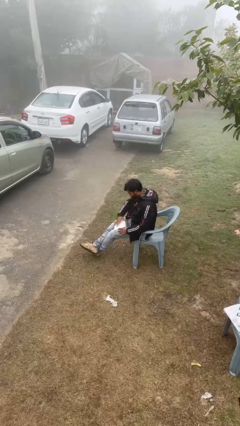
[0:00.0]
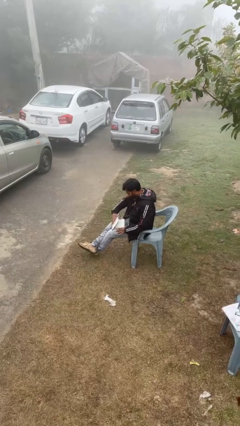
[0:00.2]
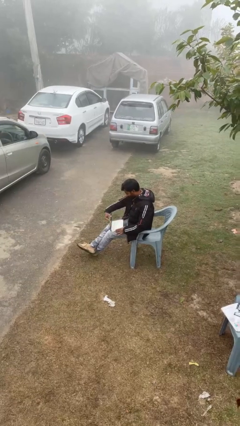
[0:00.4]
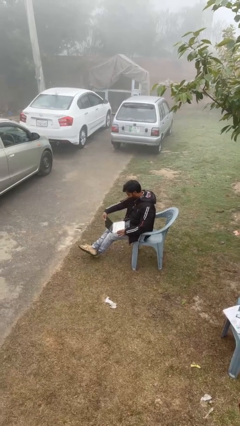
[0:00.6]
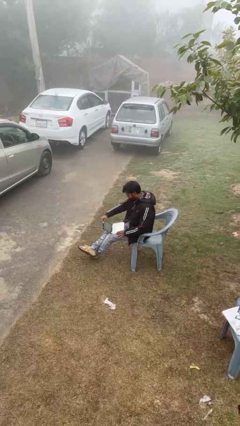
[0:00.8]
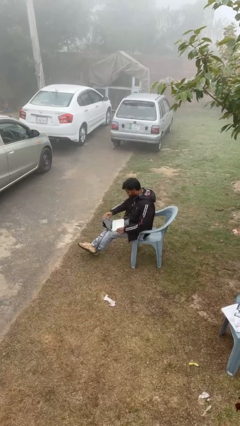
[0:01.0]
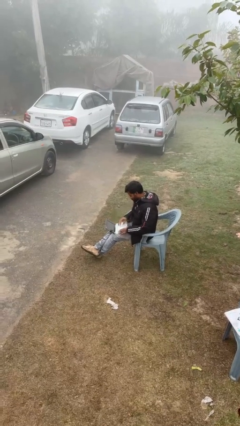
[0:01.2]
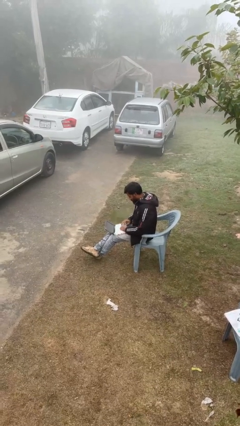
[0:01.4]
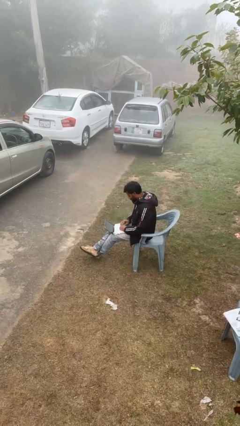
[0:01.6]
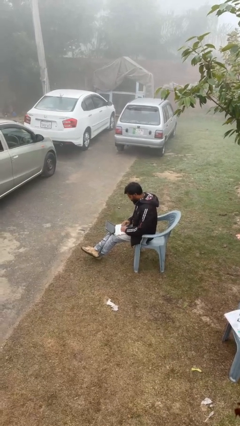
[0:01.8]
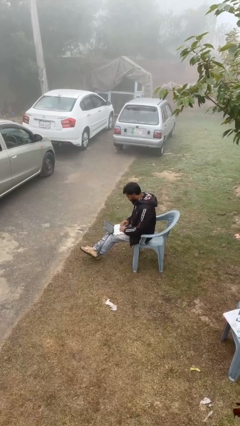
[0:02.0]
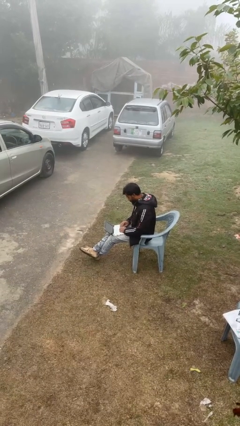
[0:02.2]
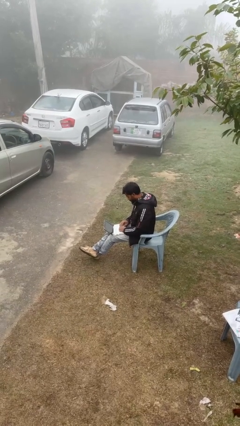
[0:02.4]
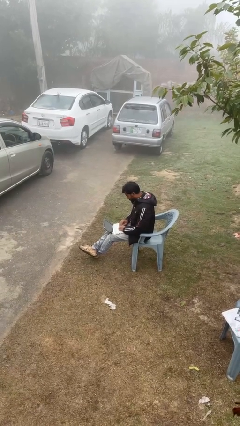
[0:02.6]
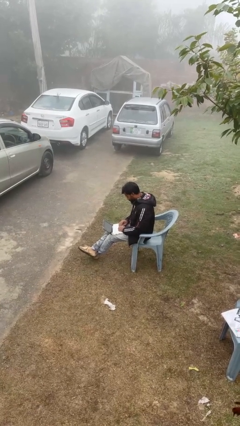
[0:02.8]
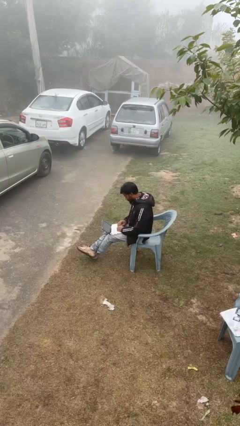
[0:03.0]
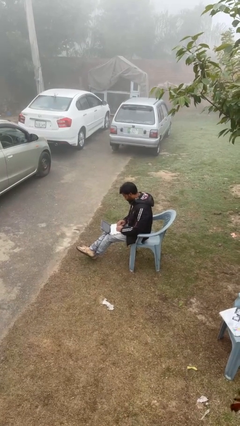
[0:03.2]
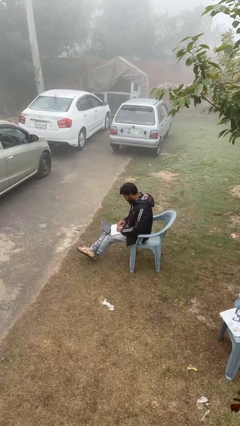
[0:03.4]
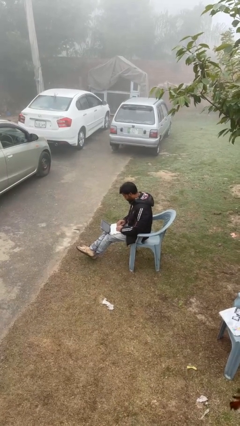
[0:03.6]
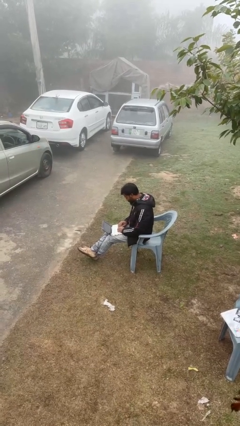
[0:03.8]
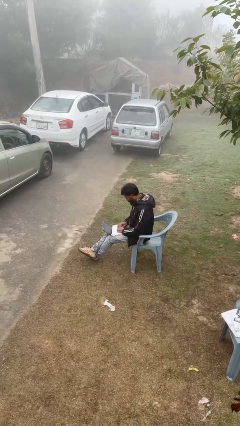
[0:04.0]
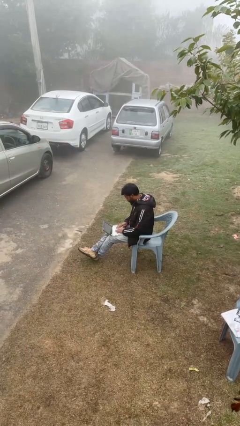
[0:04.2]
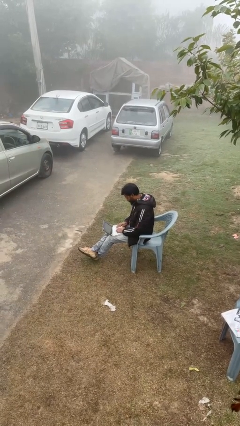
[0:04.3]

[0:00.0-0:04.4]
person interacts with laptop

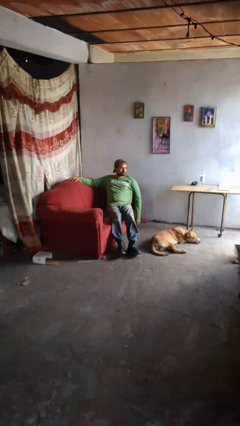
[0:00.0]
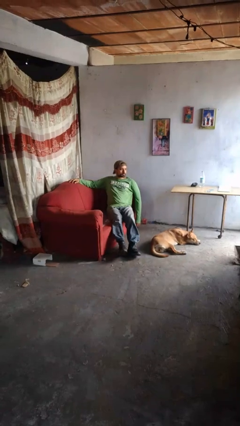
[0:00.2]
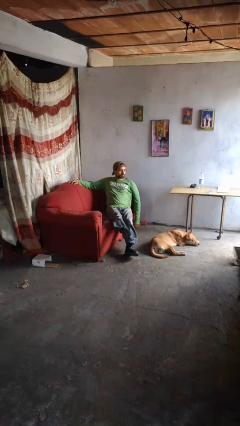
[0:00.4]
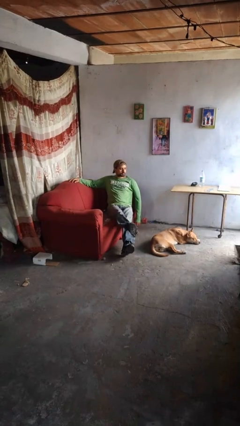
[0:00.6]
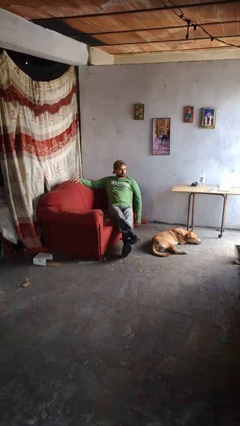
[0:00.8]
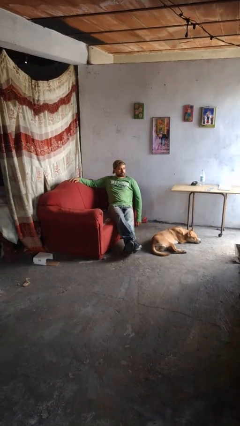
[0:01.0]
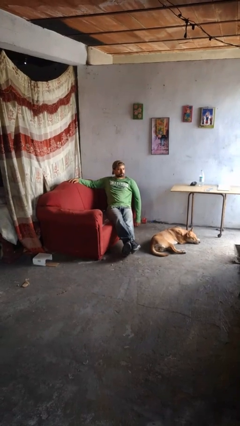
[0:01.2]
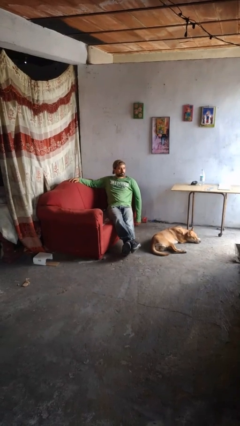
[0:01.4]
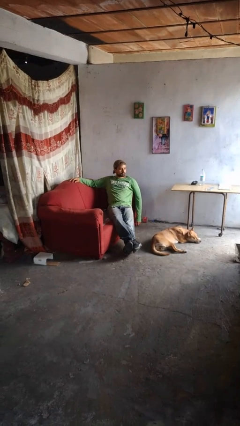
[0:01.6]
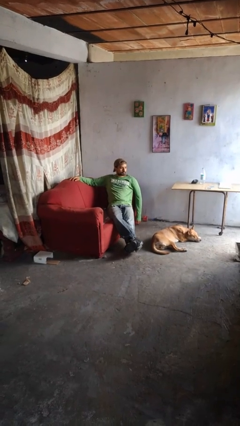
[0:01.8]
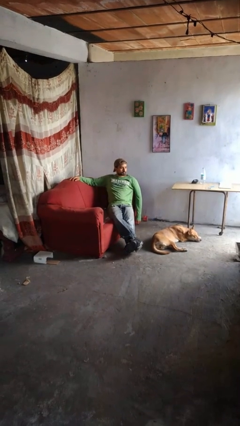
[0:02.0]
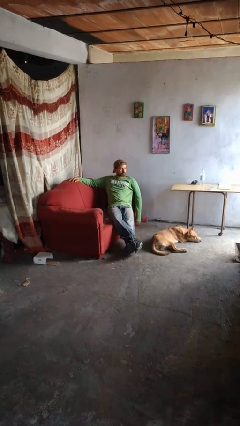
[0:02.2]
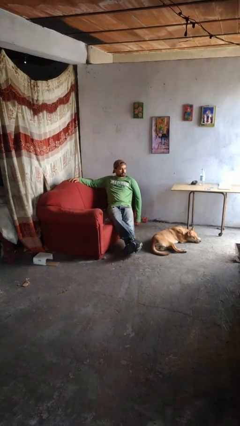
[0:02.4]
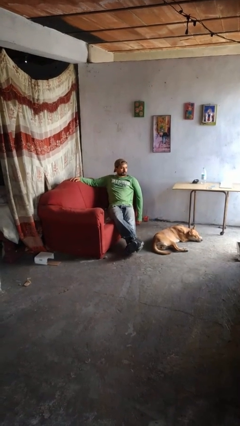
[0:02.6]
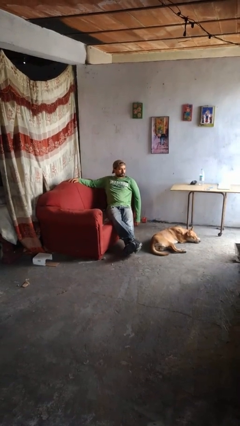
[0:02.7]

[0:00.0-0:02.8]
person crosses legs

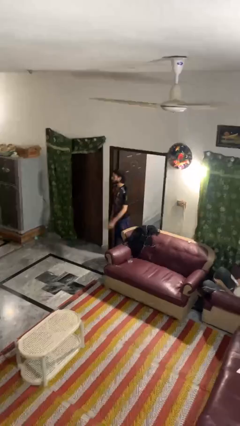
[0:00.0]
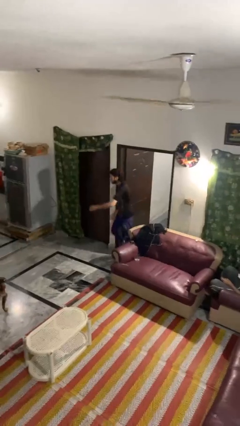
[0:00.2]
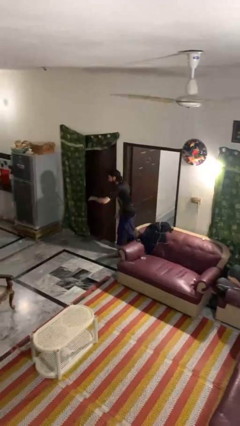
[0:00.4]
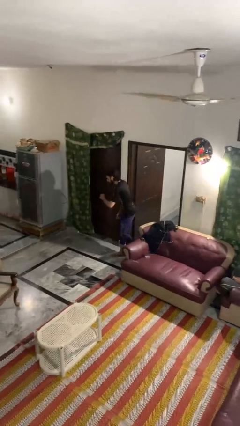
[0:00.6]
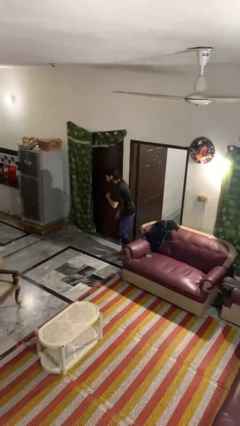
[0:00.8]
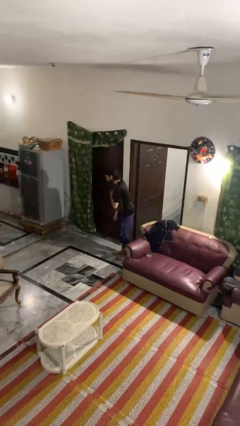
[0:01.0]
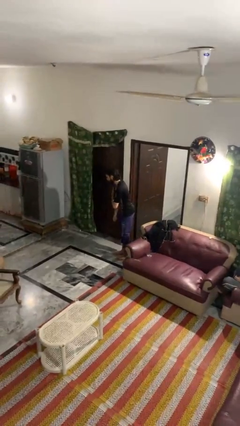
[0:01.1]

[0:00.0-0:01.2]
person bumps into wall

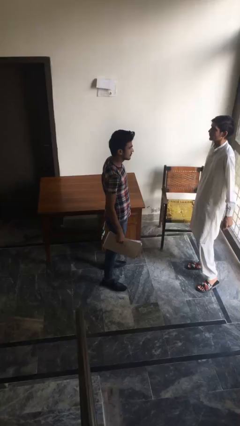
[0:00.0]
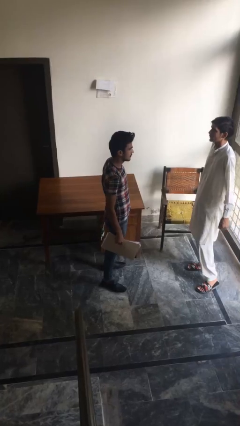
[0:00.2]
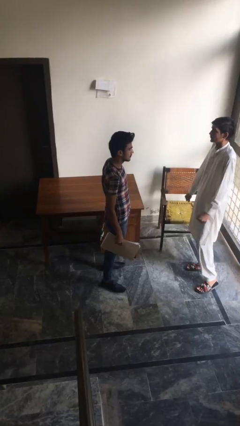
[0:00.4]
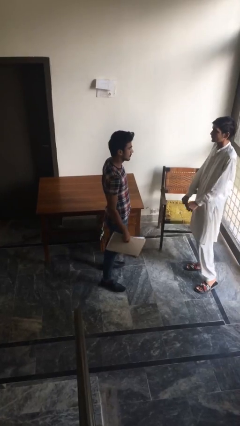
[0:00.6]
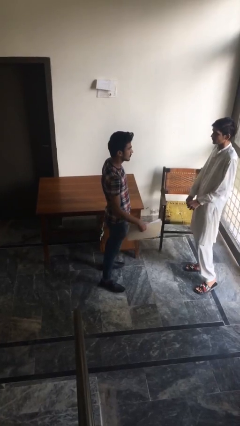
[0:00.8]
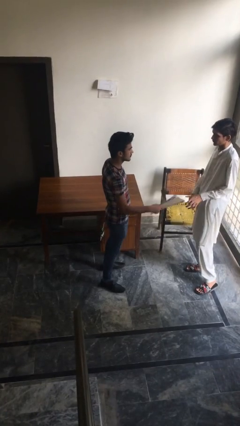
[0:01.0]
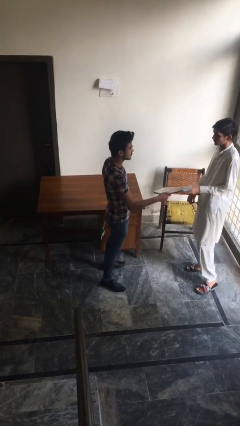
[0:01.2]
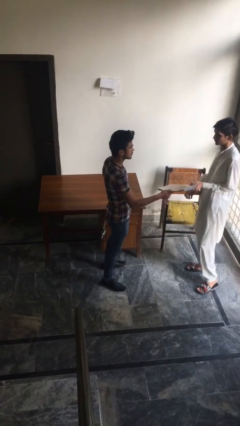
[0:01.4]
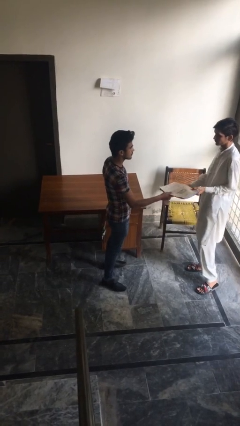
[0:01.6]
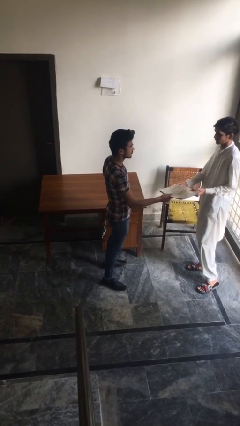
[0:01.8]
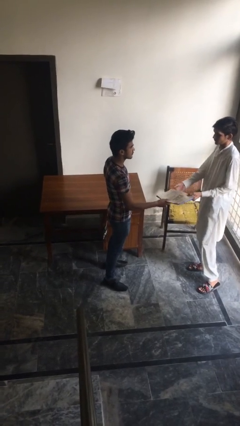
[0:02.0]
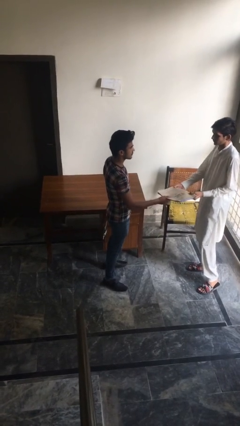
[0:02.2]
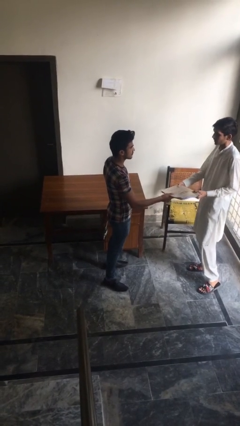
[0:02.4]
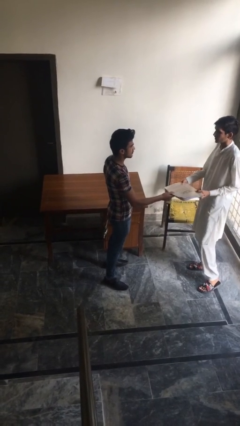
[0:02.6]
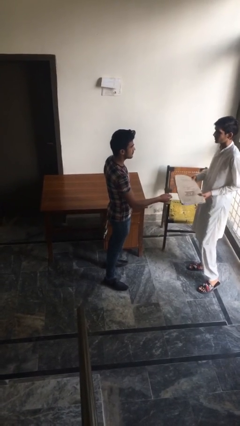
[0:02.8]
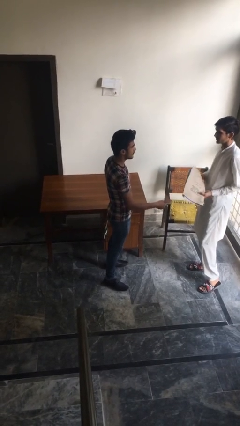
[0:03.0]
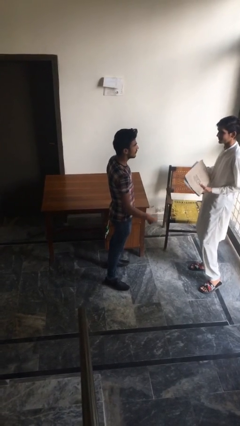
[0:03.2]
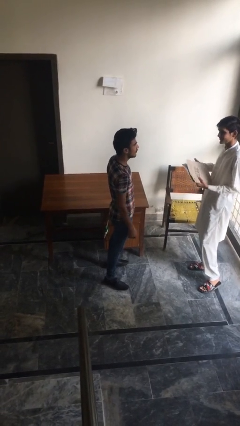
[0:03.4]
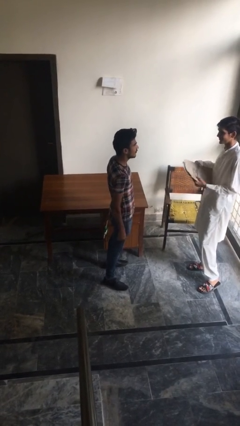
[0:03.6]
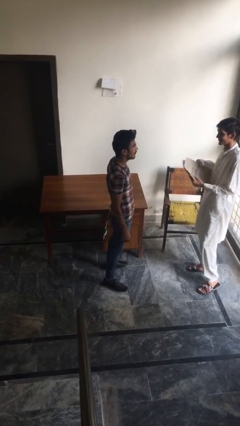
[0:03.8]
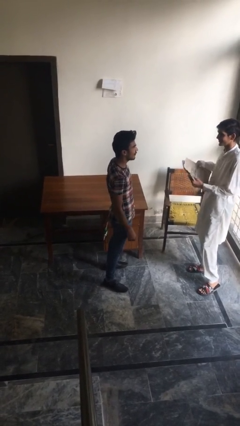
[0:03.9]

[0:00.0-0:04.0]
person transfers object to person

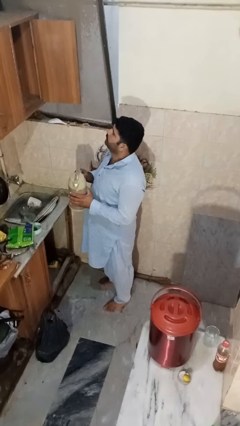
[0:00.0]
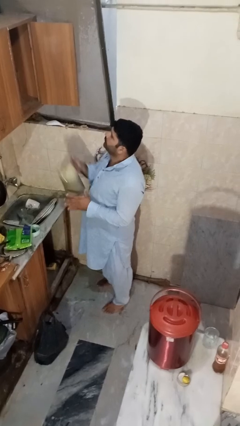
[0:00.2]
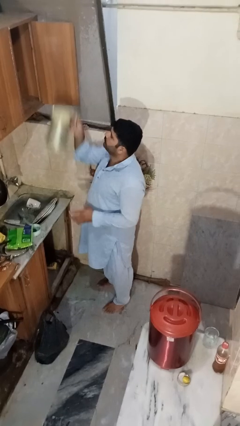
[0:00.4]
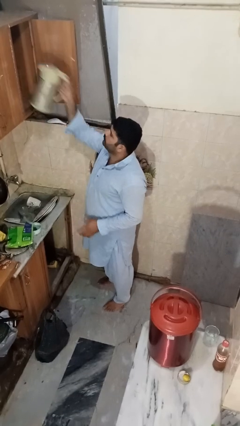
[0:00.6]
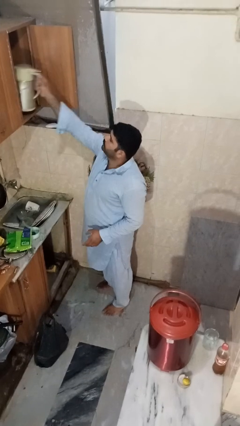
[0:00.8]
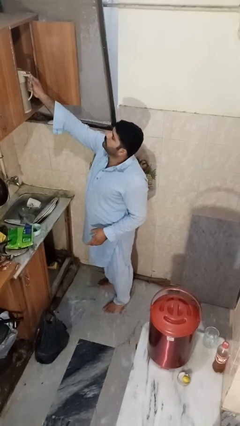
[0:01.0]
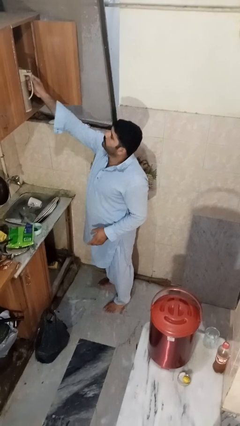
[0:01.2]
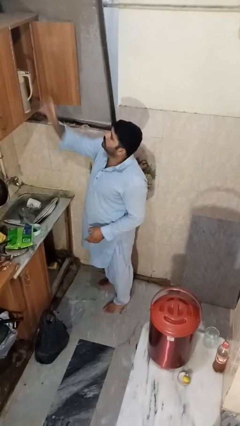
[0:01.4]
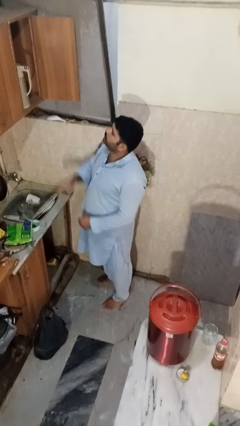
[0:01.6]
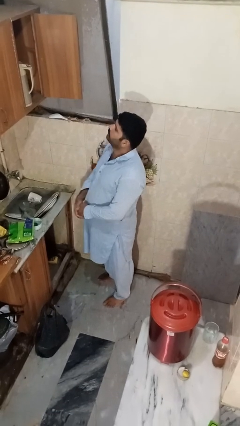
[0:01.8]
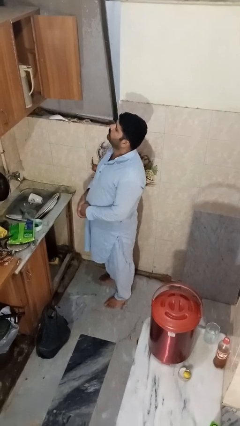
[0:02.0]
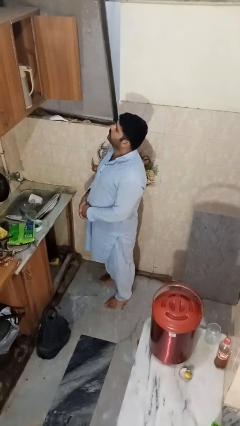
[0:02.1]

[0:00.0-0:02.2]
person puts object in cabinet

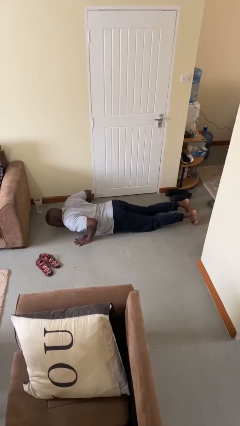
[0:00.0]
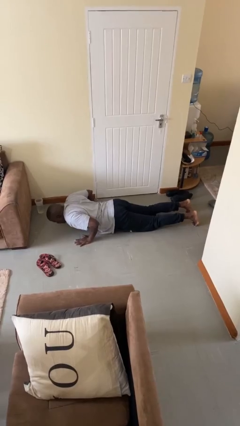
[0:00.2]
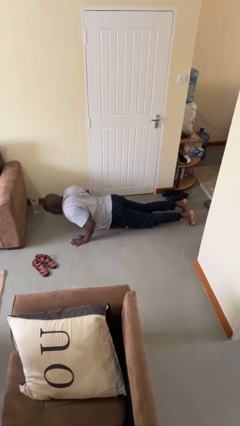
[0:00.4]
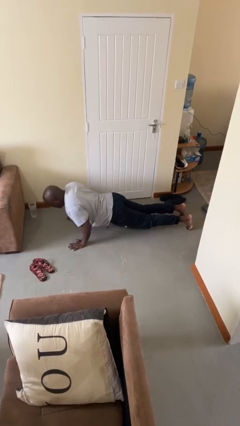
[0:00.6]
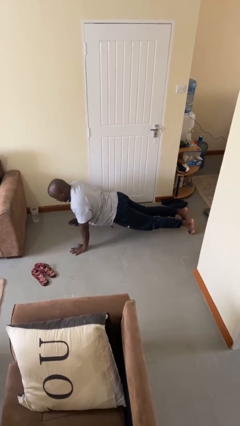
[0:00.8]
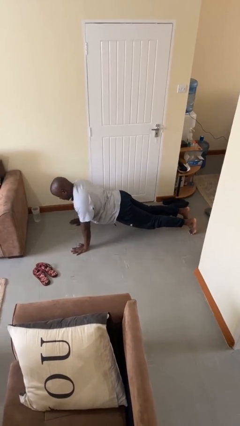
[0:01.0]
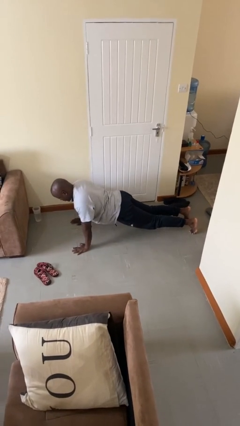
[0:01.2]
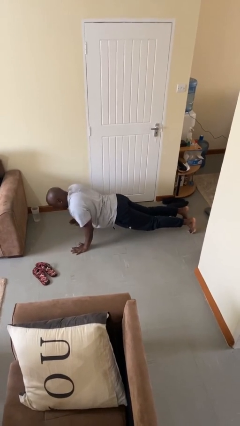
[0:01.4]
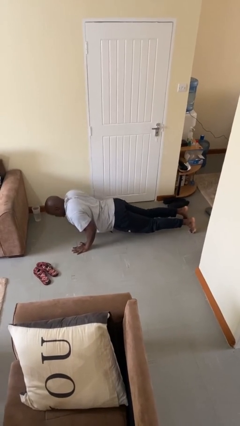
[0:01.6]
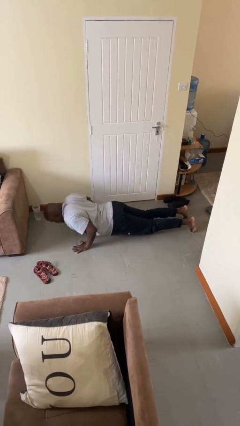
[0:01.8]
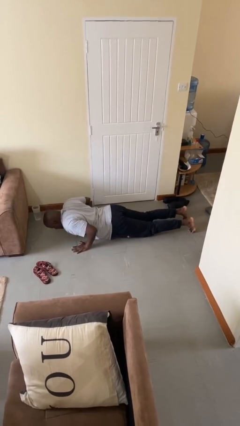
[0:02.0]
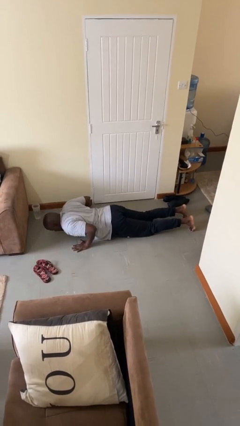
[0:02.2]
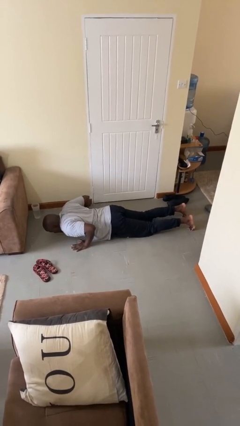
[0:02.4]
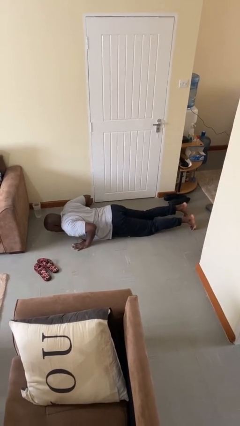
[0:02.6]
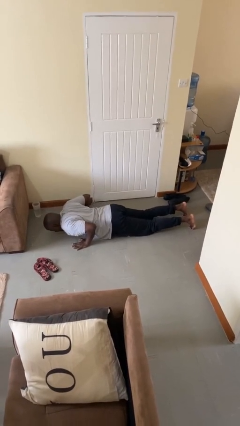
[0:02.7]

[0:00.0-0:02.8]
person exercises with pushup
